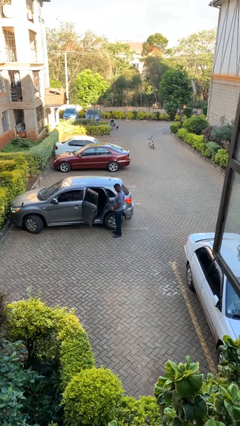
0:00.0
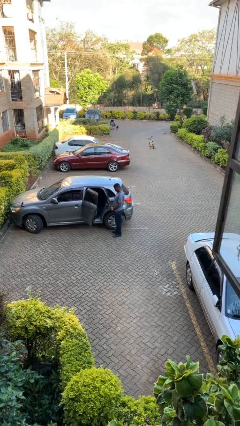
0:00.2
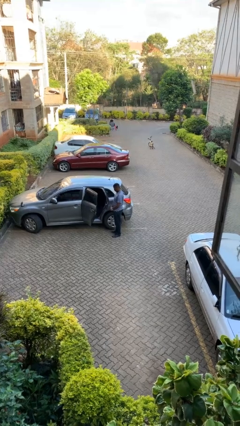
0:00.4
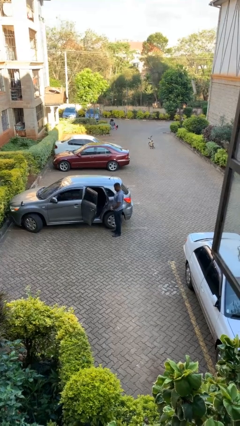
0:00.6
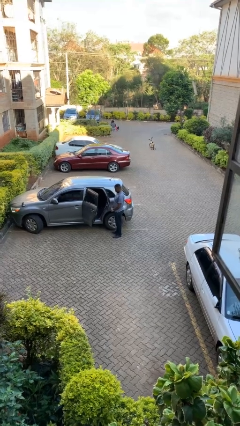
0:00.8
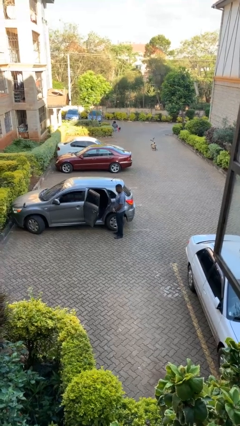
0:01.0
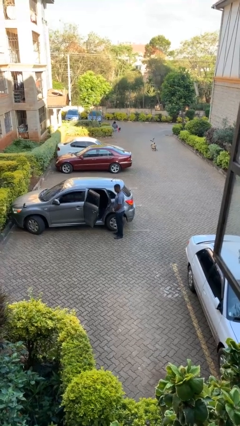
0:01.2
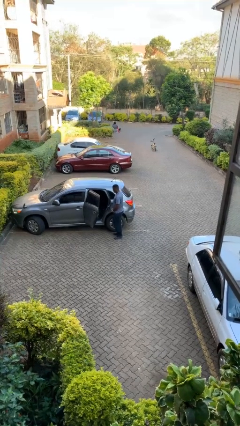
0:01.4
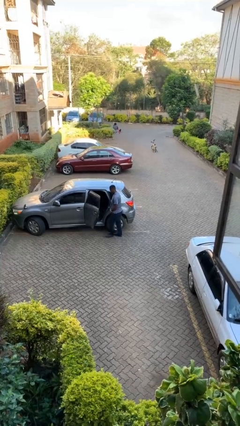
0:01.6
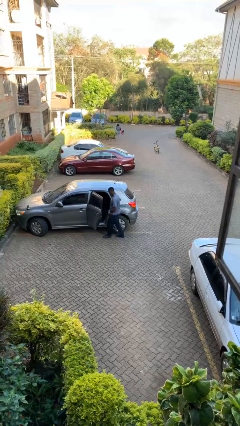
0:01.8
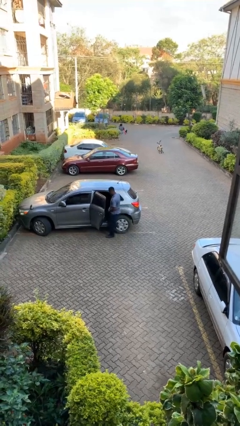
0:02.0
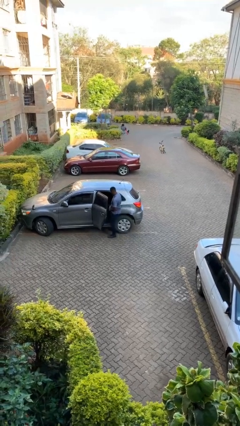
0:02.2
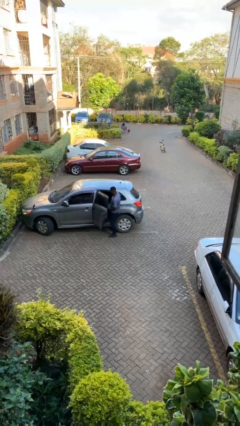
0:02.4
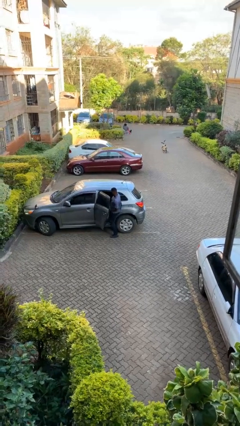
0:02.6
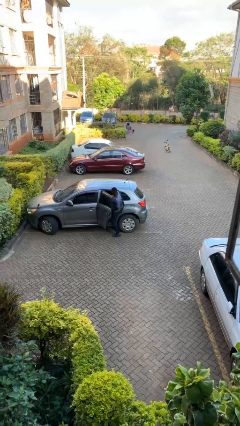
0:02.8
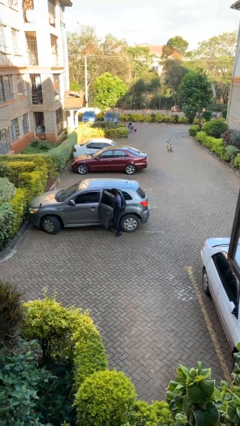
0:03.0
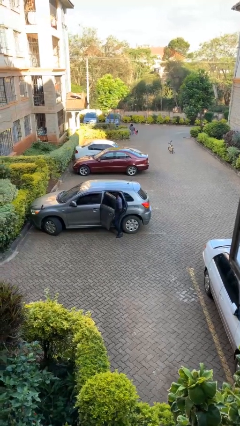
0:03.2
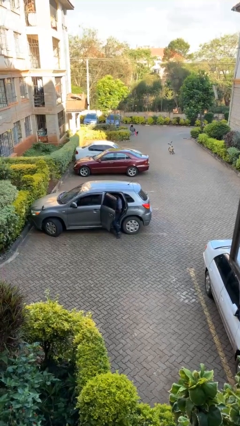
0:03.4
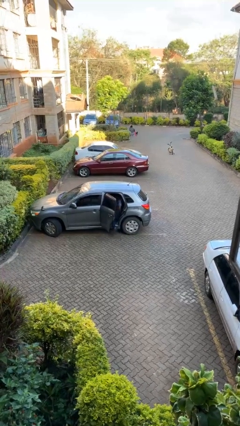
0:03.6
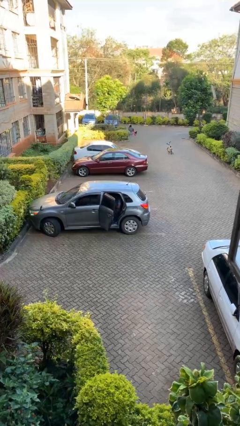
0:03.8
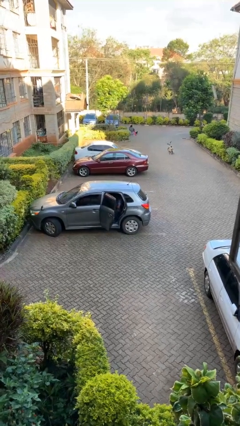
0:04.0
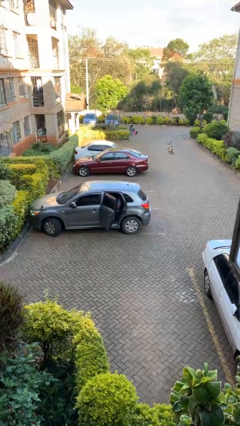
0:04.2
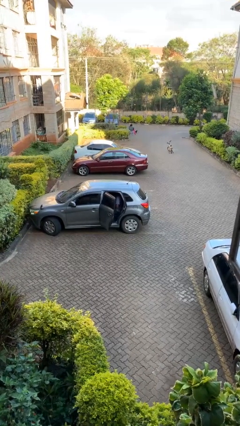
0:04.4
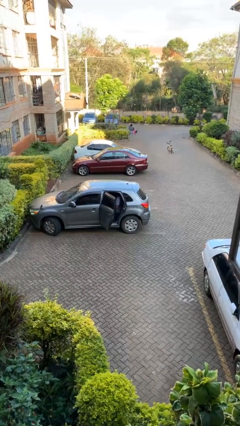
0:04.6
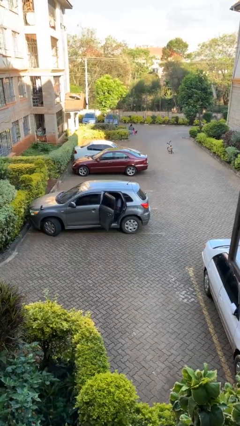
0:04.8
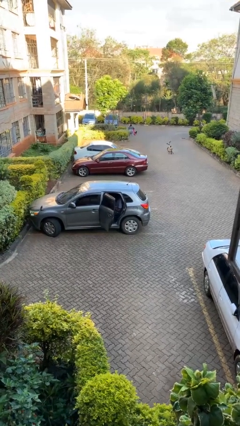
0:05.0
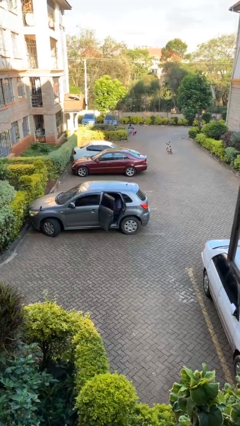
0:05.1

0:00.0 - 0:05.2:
person enters car

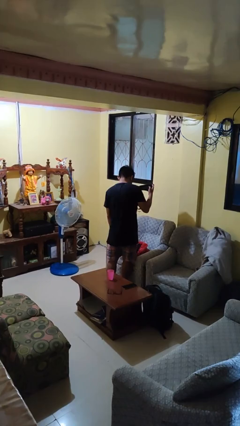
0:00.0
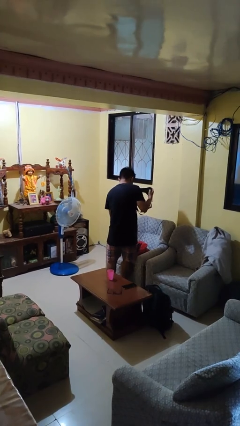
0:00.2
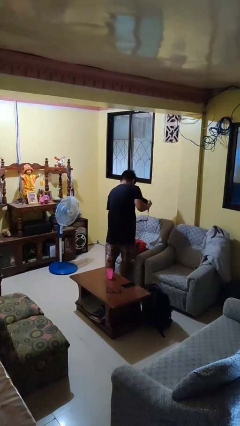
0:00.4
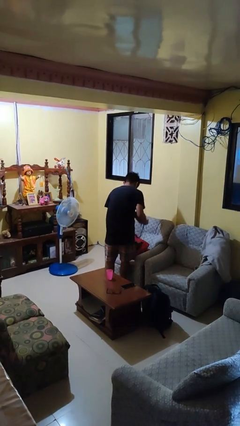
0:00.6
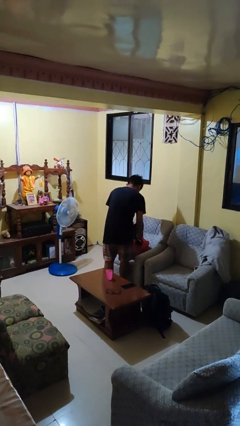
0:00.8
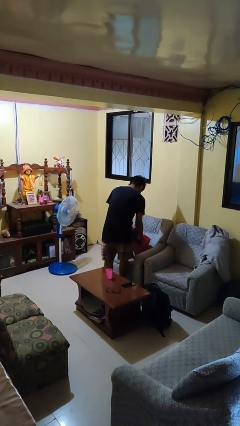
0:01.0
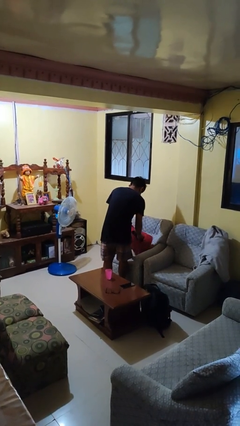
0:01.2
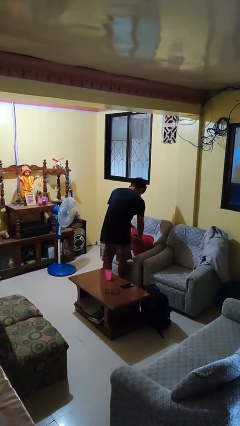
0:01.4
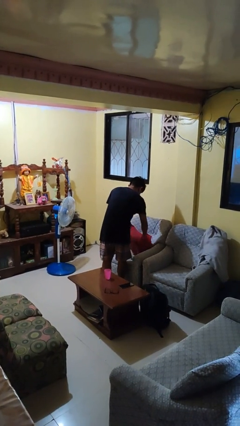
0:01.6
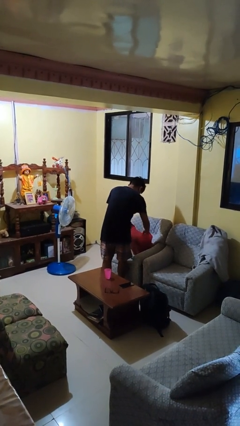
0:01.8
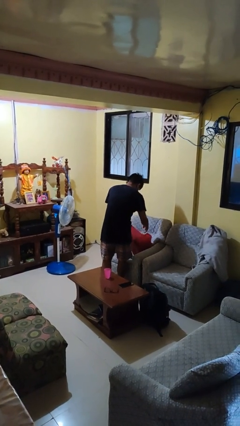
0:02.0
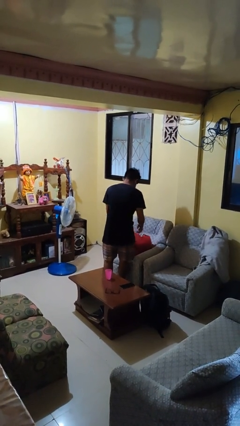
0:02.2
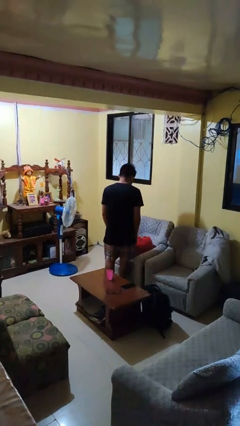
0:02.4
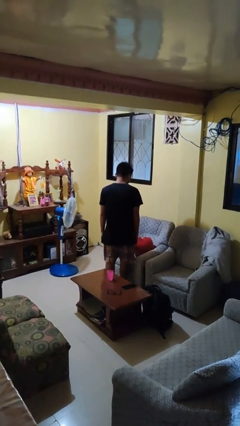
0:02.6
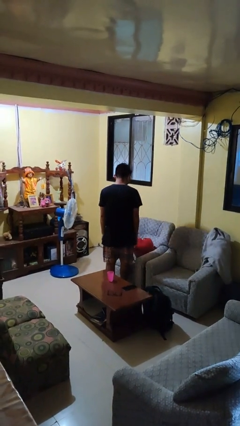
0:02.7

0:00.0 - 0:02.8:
person puts object into bag

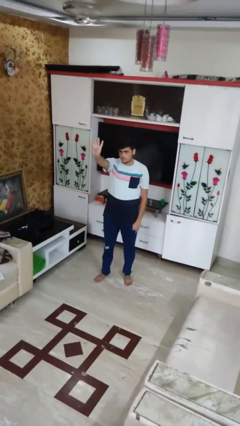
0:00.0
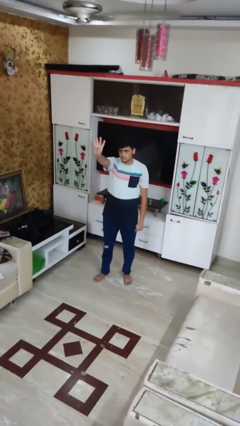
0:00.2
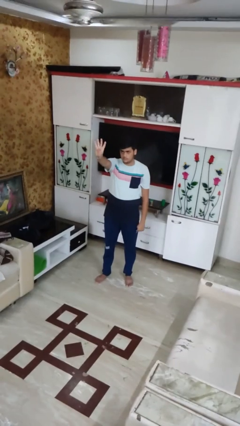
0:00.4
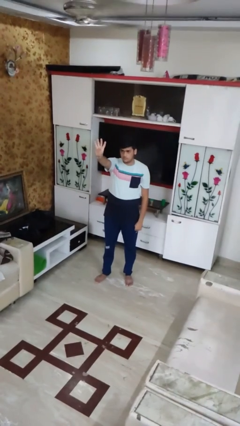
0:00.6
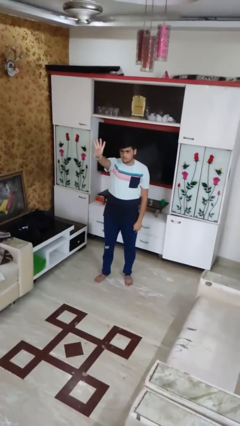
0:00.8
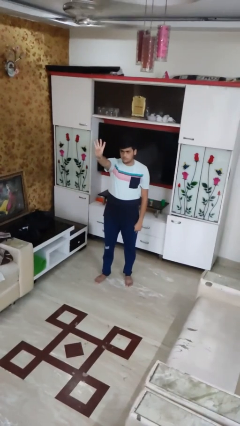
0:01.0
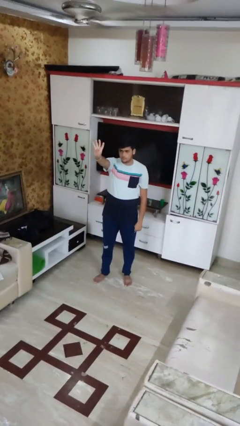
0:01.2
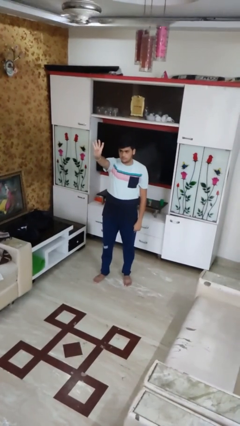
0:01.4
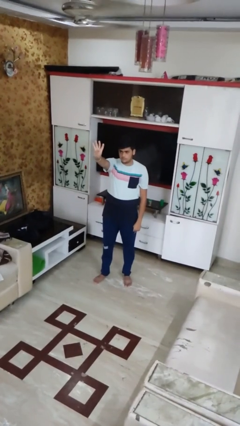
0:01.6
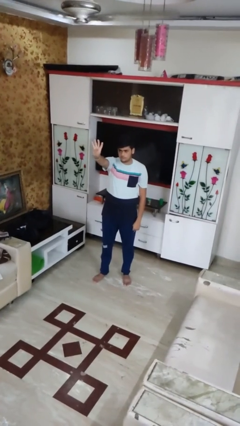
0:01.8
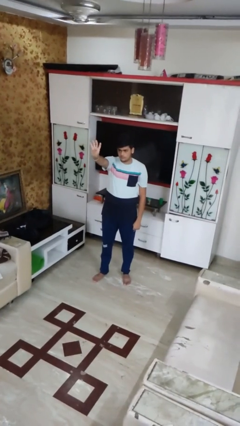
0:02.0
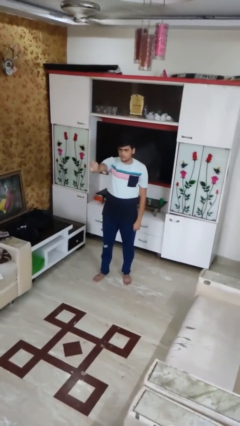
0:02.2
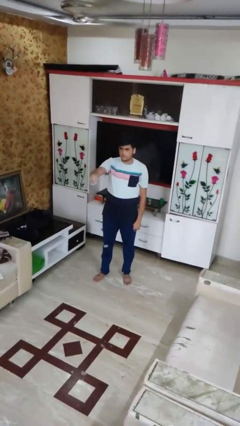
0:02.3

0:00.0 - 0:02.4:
person gestures number four

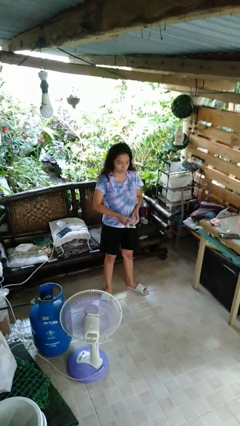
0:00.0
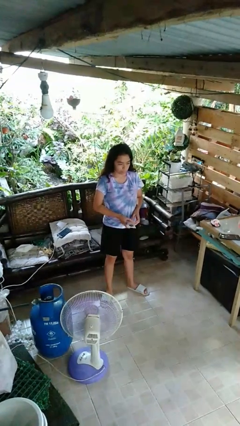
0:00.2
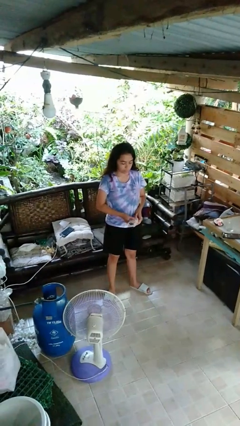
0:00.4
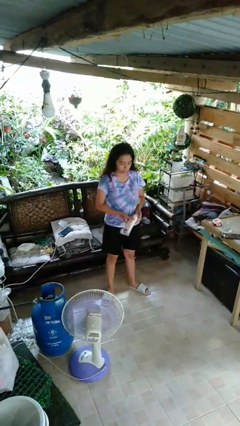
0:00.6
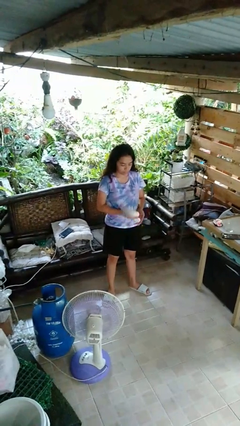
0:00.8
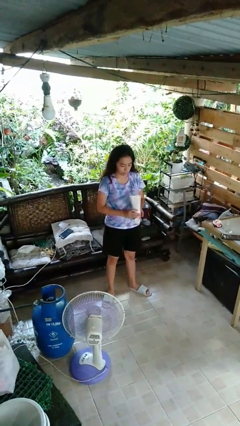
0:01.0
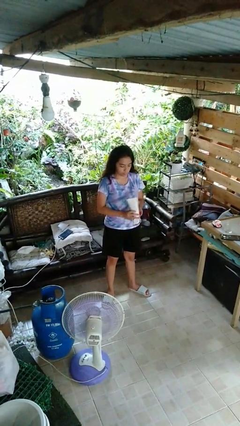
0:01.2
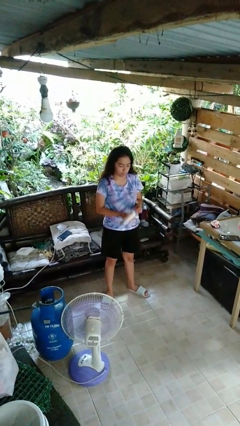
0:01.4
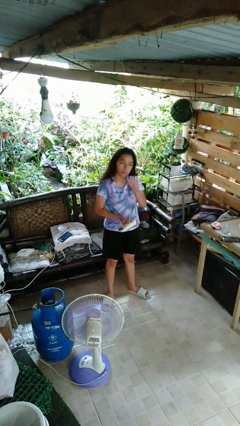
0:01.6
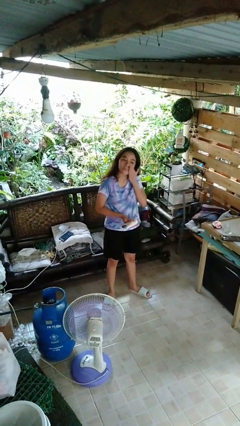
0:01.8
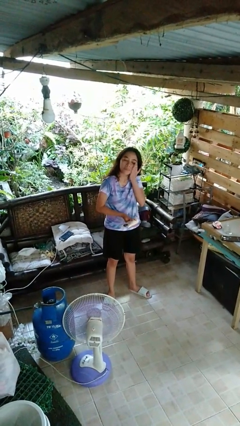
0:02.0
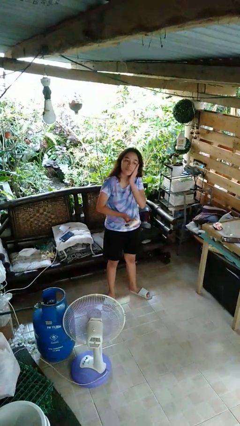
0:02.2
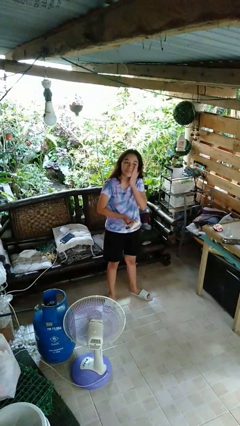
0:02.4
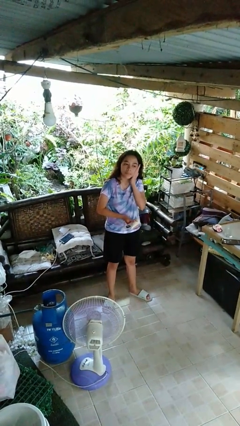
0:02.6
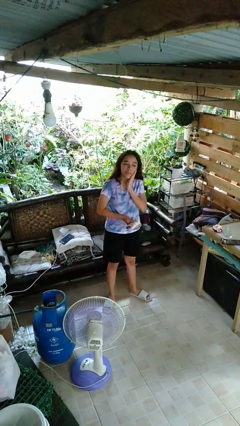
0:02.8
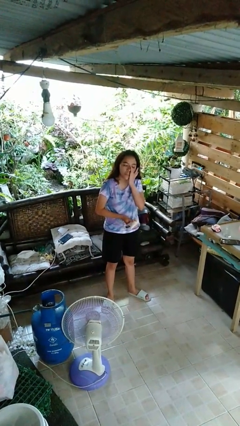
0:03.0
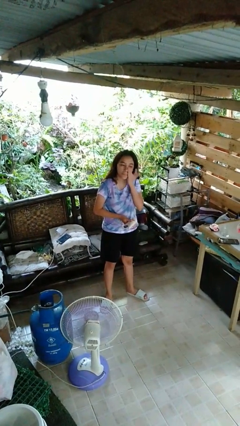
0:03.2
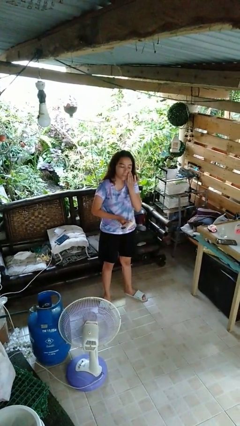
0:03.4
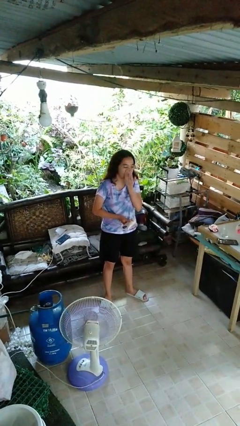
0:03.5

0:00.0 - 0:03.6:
person applies sunscreen

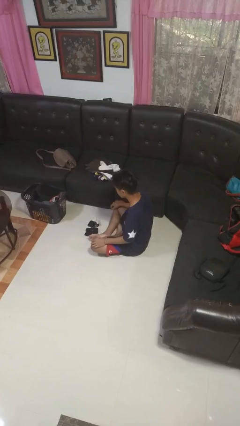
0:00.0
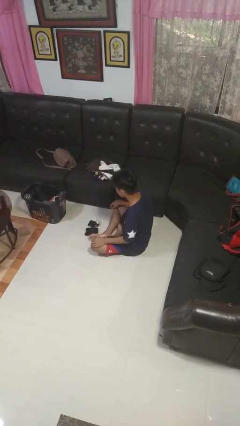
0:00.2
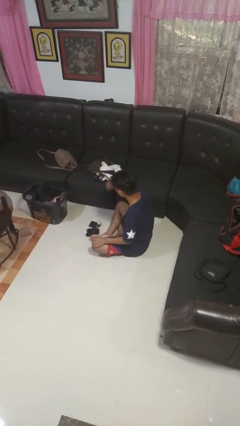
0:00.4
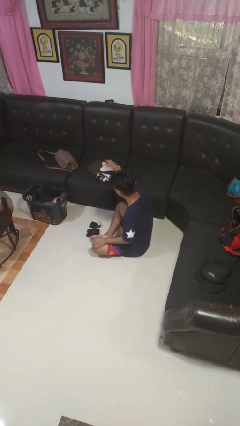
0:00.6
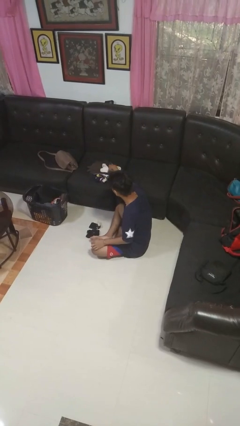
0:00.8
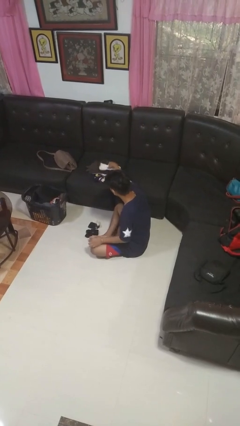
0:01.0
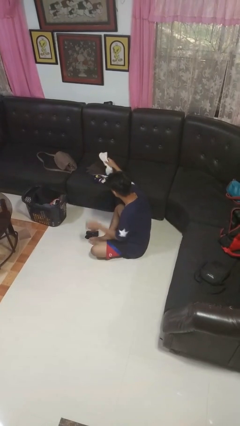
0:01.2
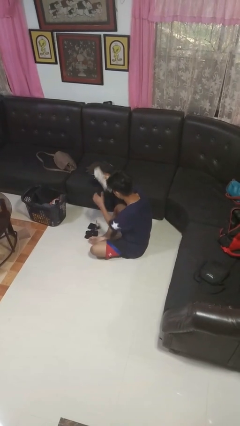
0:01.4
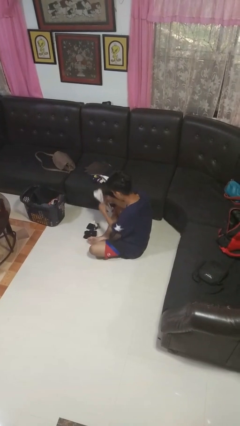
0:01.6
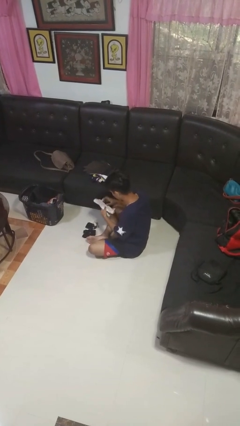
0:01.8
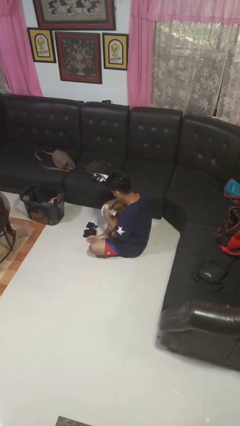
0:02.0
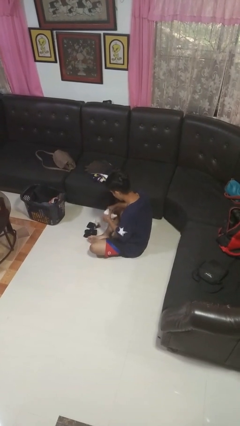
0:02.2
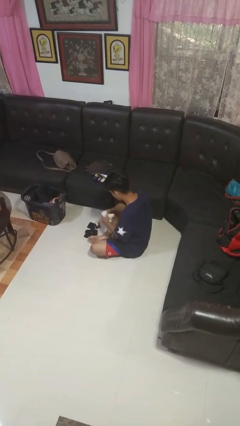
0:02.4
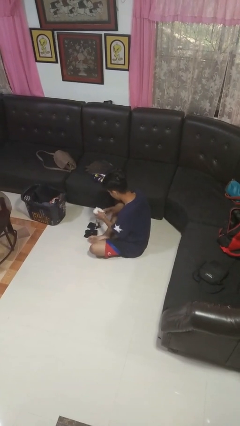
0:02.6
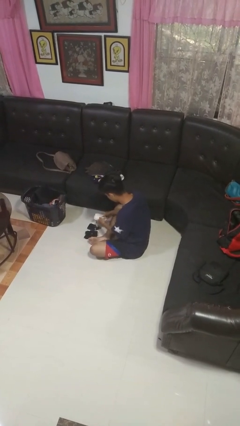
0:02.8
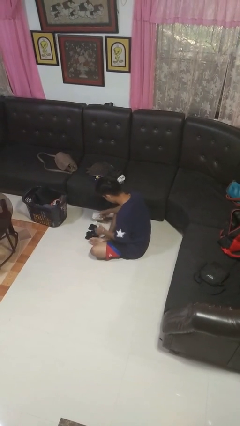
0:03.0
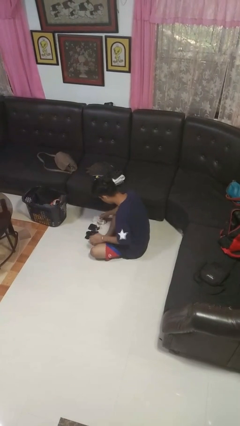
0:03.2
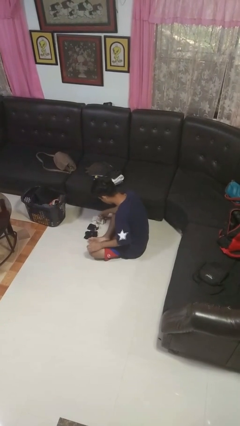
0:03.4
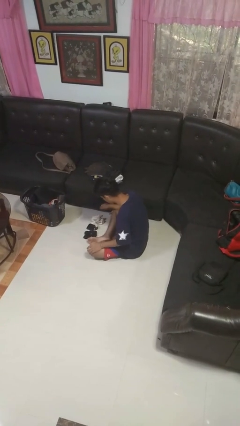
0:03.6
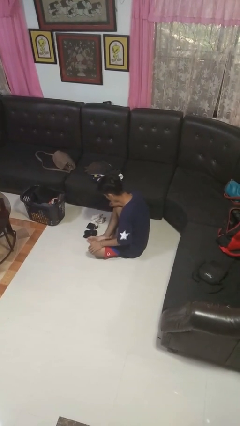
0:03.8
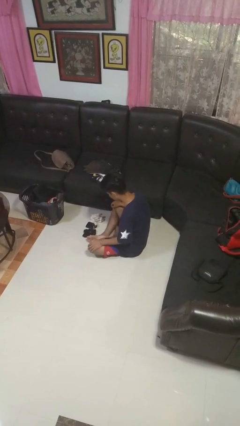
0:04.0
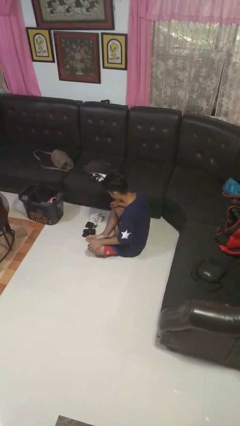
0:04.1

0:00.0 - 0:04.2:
person folds socks
